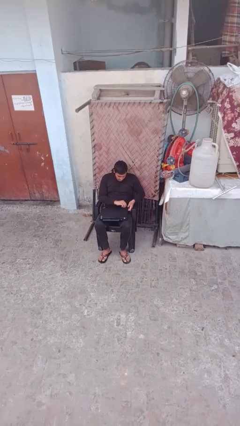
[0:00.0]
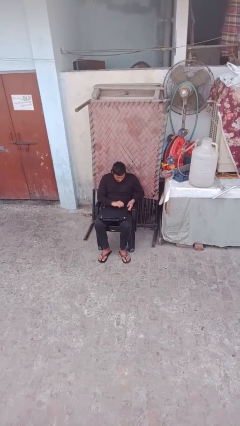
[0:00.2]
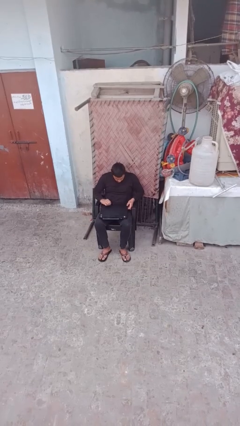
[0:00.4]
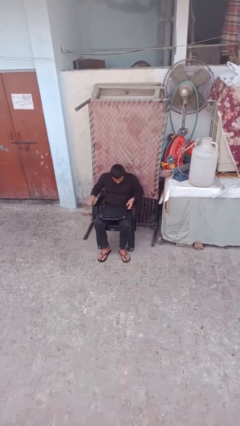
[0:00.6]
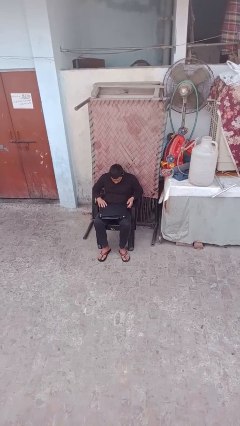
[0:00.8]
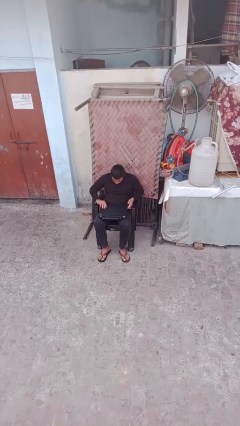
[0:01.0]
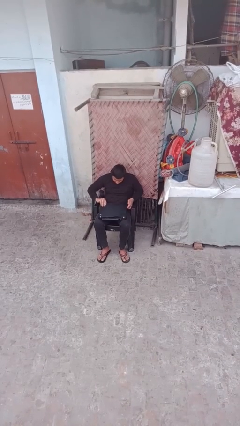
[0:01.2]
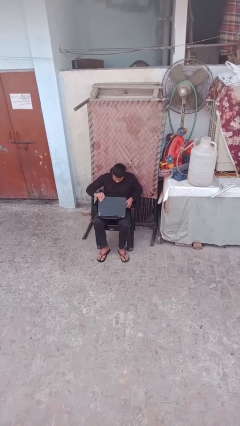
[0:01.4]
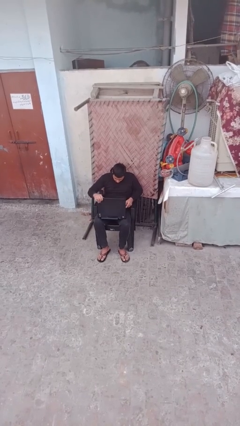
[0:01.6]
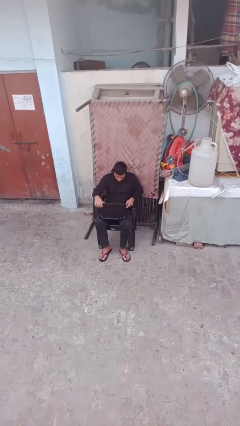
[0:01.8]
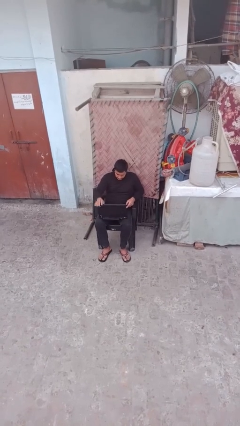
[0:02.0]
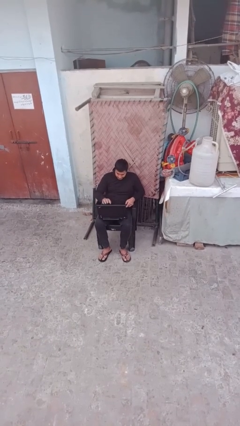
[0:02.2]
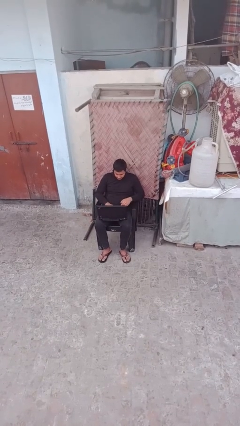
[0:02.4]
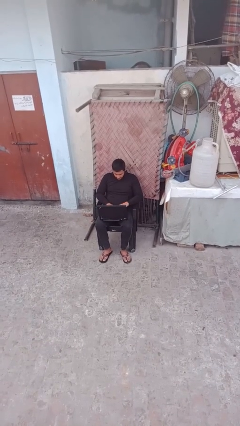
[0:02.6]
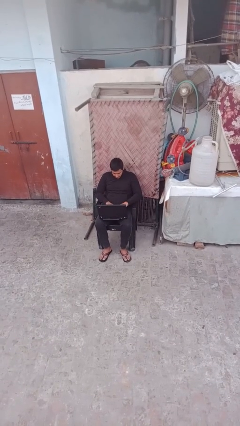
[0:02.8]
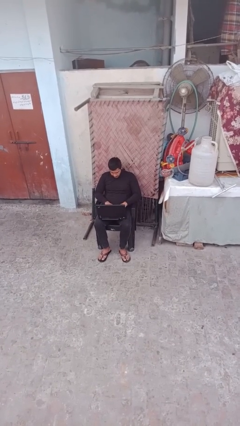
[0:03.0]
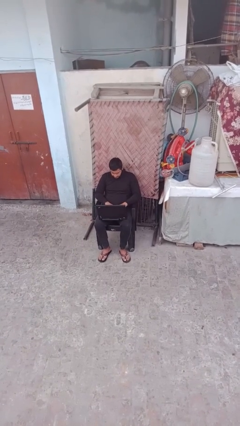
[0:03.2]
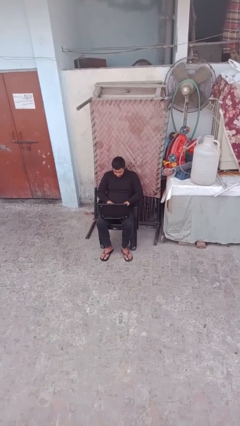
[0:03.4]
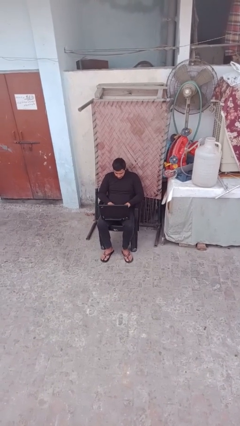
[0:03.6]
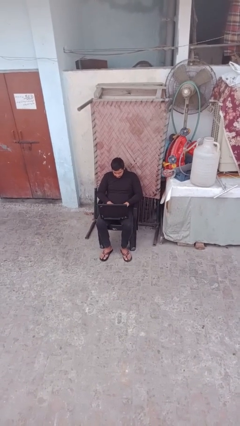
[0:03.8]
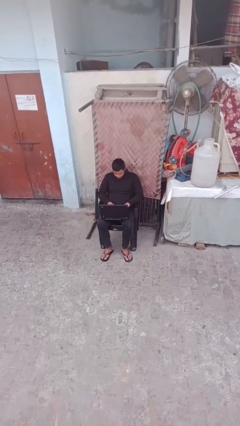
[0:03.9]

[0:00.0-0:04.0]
person interacts with laptop

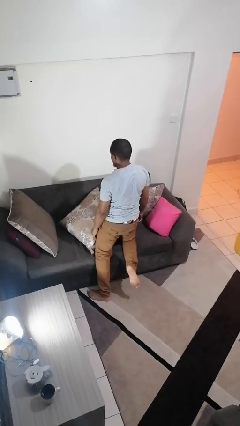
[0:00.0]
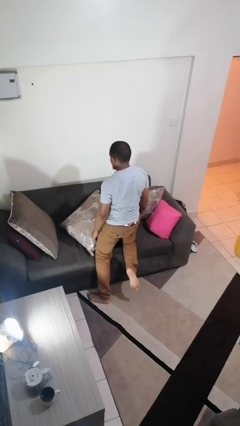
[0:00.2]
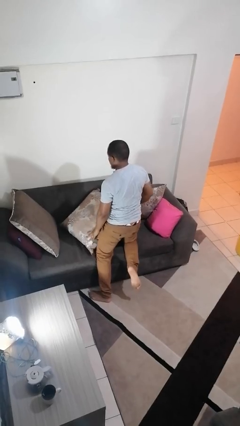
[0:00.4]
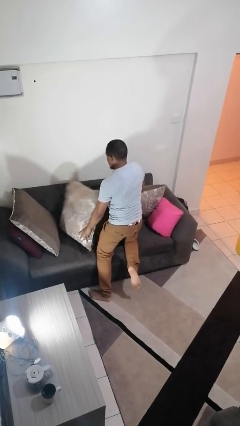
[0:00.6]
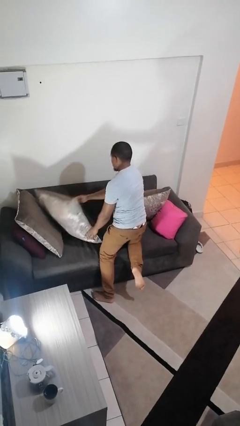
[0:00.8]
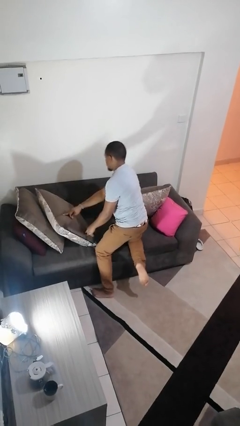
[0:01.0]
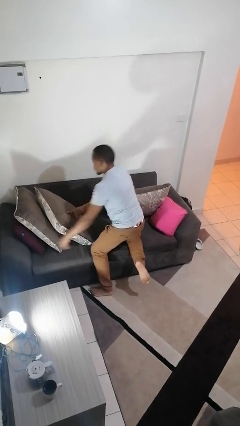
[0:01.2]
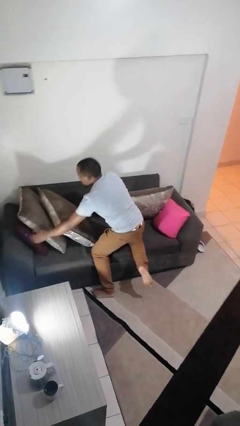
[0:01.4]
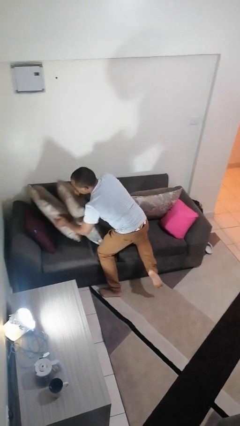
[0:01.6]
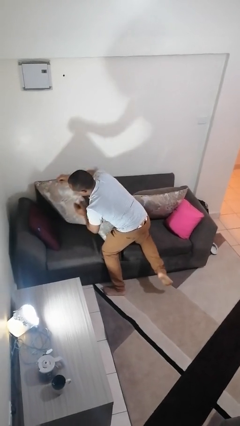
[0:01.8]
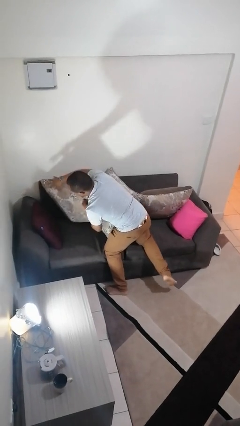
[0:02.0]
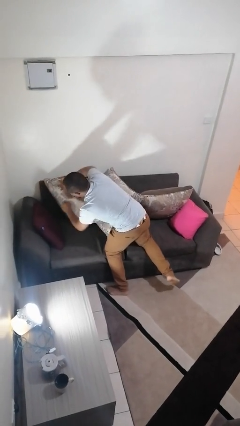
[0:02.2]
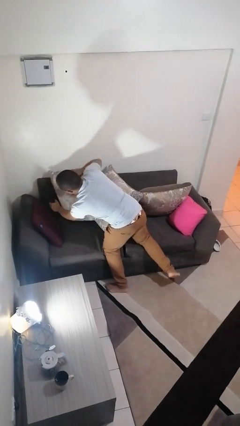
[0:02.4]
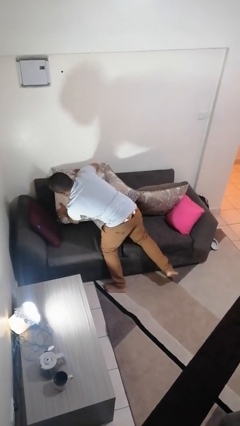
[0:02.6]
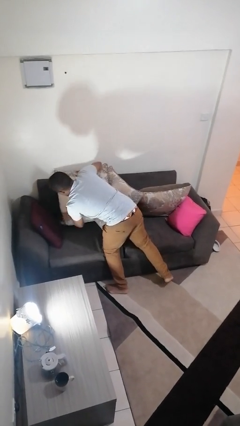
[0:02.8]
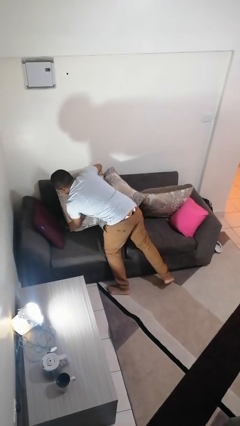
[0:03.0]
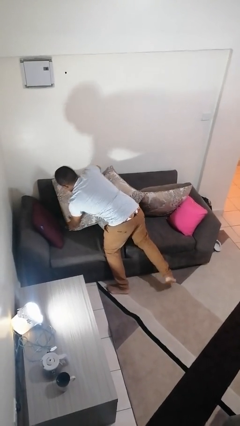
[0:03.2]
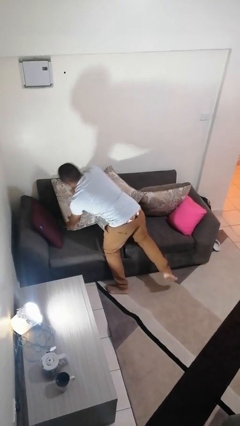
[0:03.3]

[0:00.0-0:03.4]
person searches in couch

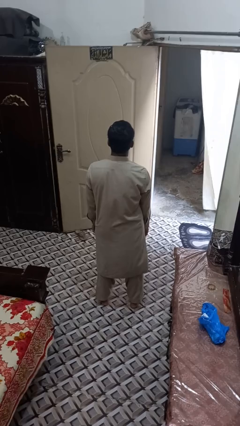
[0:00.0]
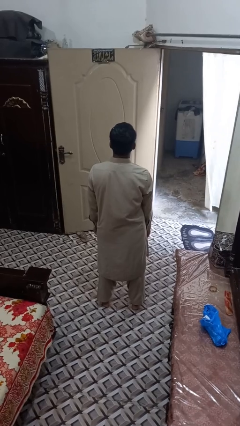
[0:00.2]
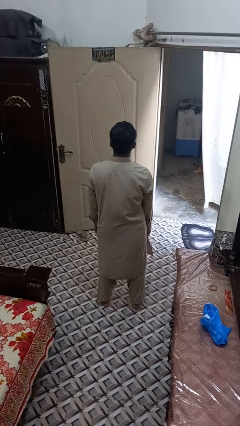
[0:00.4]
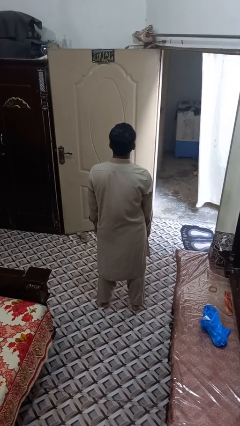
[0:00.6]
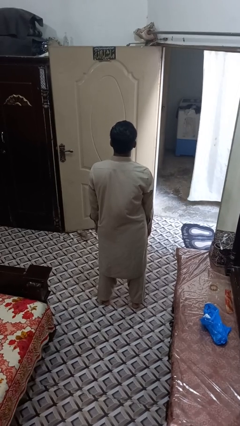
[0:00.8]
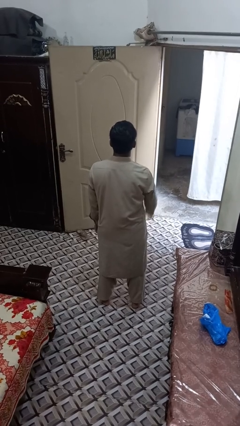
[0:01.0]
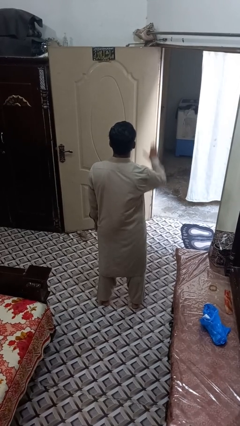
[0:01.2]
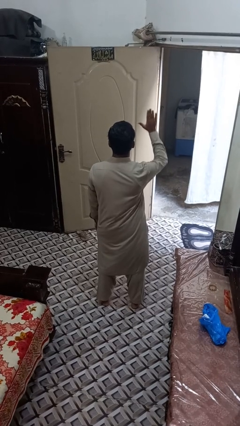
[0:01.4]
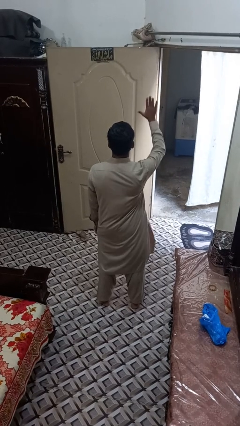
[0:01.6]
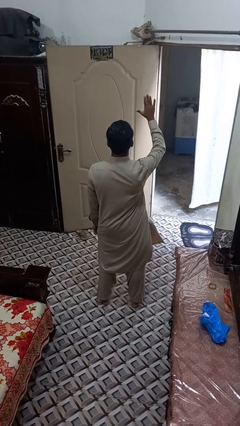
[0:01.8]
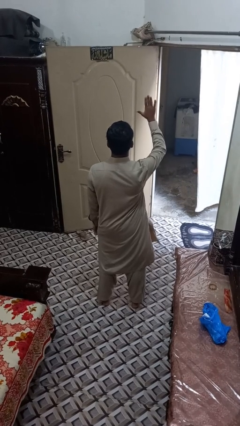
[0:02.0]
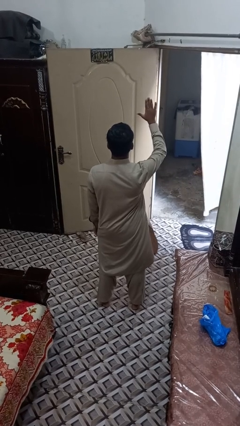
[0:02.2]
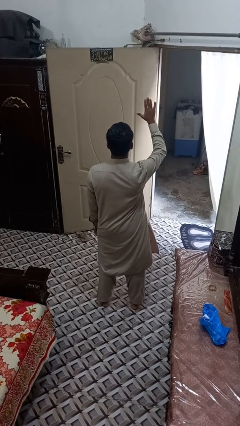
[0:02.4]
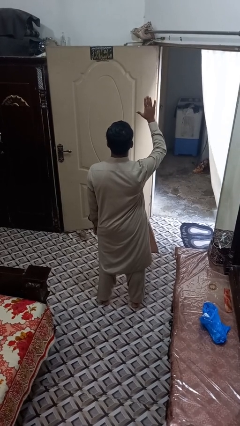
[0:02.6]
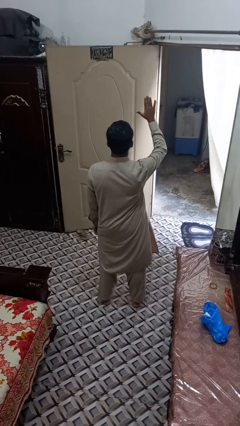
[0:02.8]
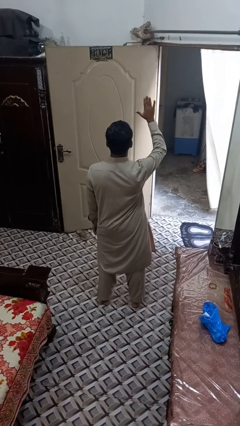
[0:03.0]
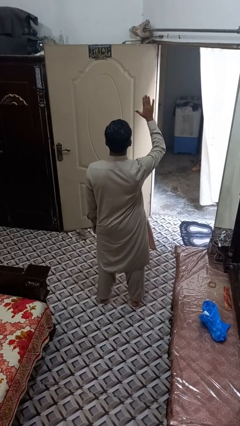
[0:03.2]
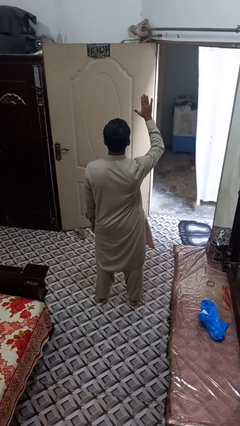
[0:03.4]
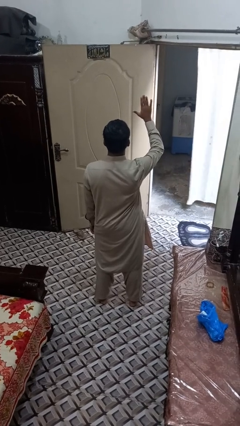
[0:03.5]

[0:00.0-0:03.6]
person gestures number five

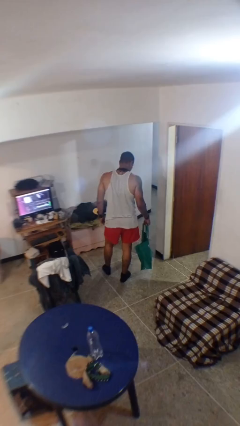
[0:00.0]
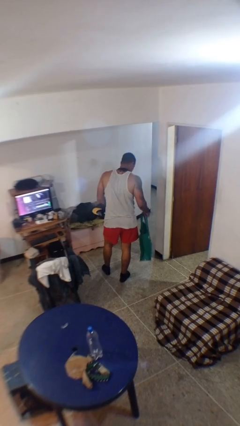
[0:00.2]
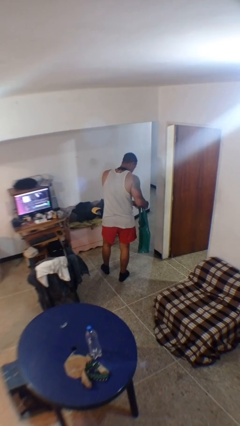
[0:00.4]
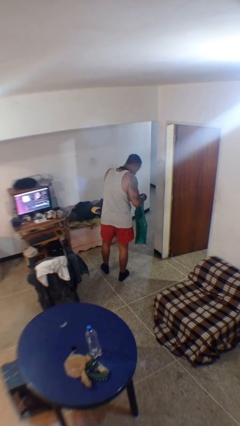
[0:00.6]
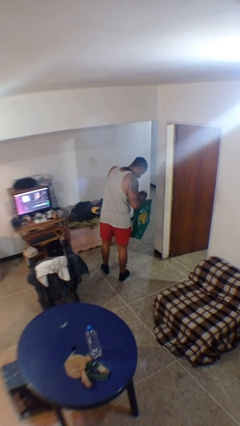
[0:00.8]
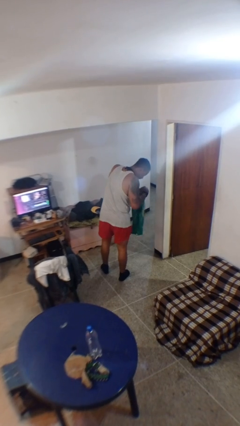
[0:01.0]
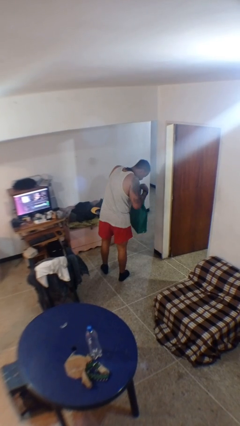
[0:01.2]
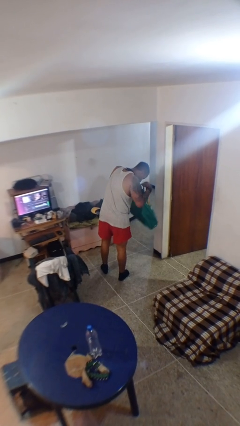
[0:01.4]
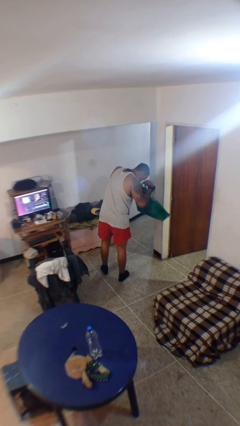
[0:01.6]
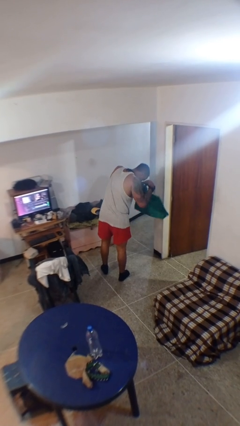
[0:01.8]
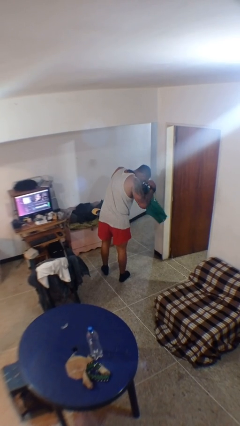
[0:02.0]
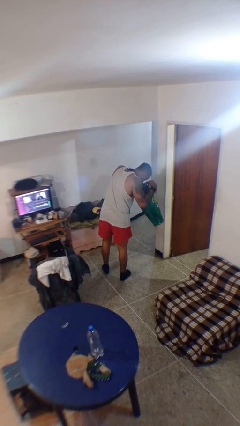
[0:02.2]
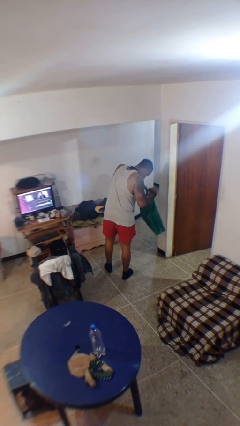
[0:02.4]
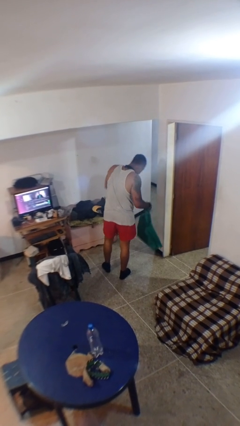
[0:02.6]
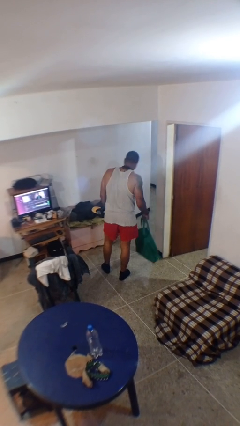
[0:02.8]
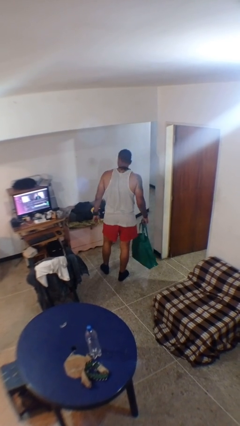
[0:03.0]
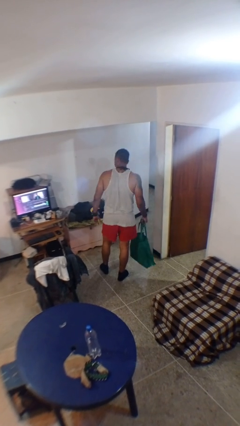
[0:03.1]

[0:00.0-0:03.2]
person searches in bag

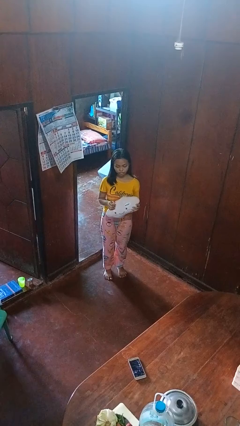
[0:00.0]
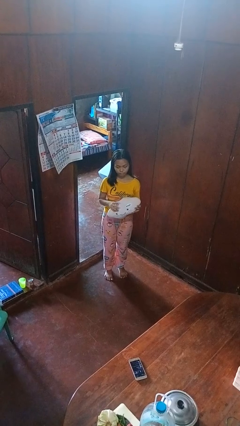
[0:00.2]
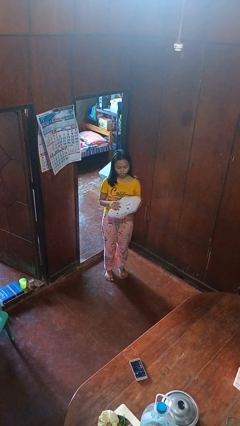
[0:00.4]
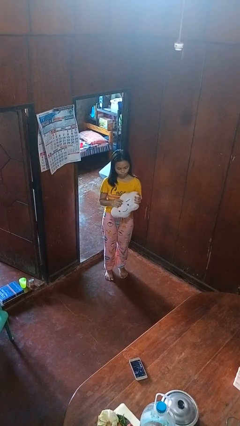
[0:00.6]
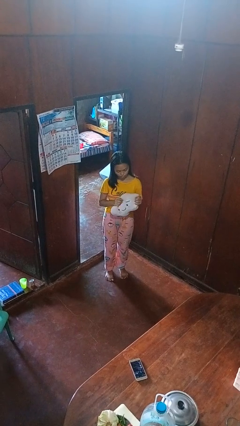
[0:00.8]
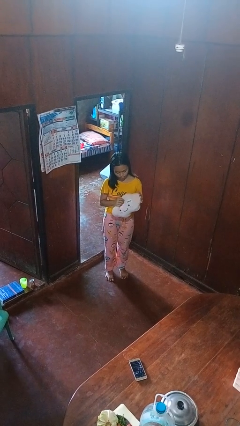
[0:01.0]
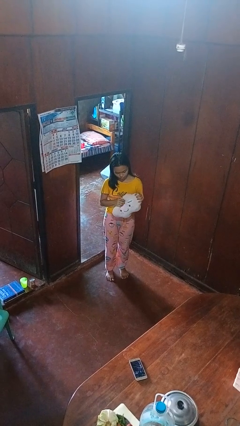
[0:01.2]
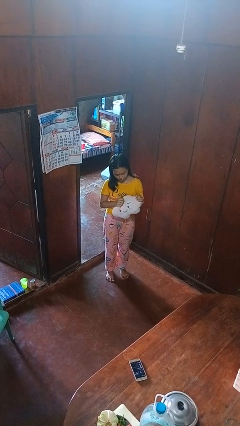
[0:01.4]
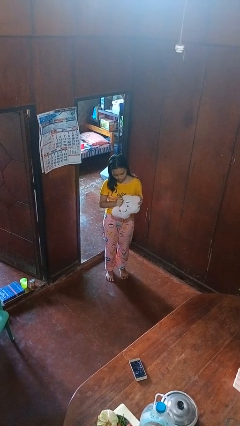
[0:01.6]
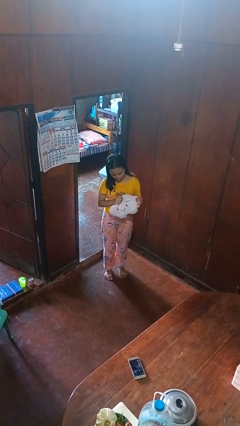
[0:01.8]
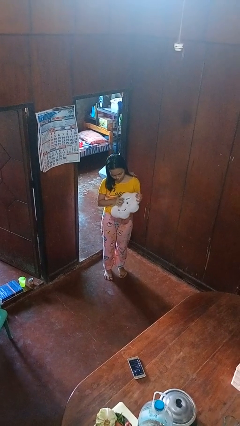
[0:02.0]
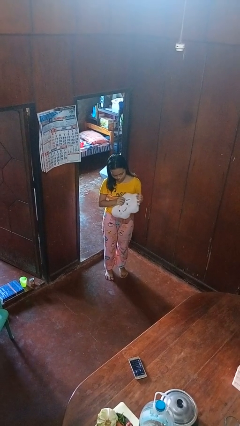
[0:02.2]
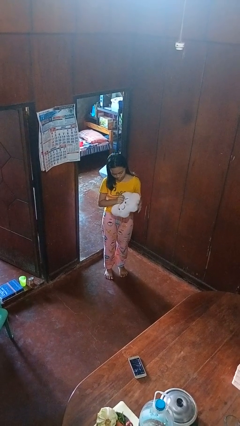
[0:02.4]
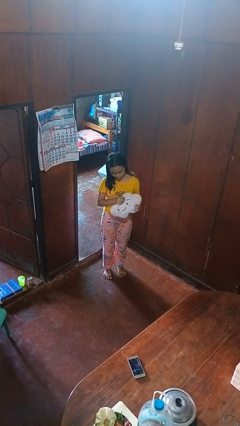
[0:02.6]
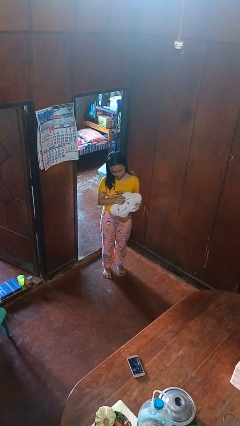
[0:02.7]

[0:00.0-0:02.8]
person squeezes object

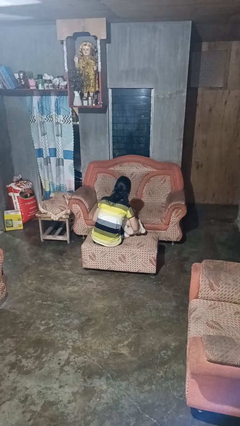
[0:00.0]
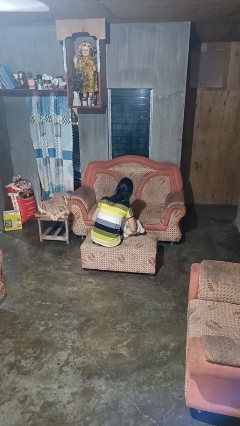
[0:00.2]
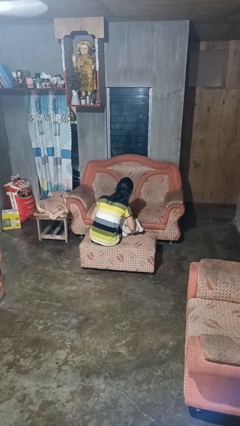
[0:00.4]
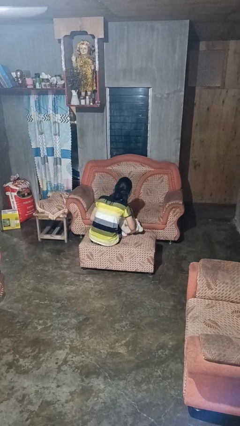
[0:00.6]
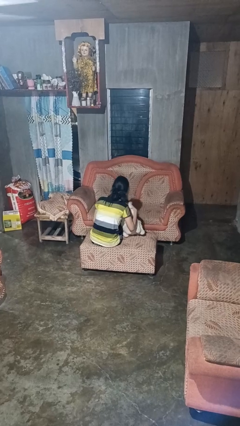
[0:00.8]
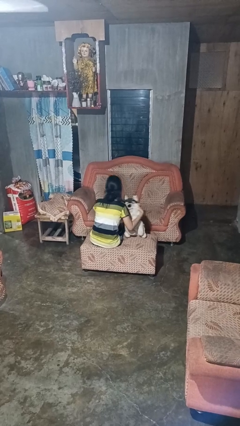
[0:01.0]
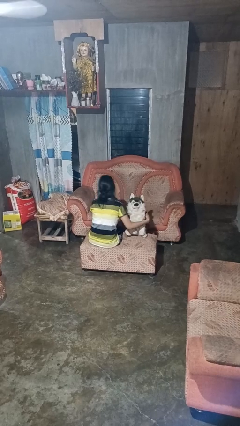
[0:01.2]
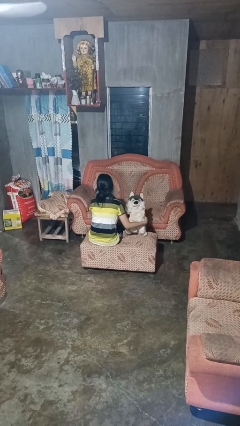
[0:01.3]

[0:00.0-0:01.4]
person hugs stuffed animal
